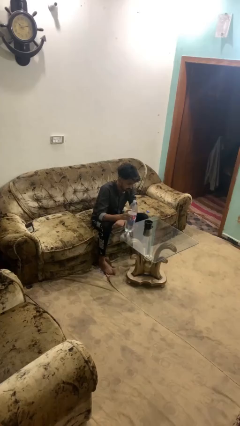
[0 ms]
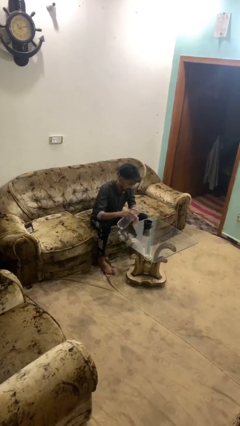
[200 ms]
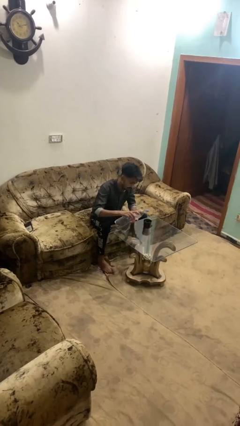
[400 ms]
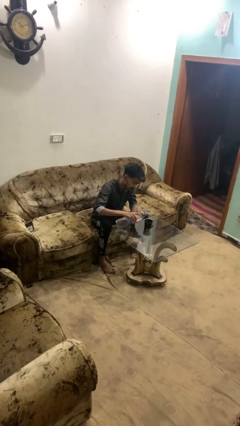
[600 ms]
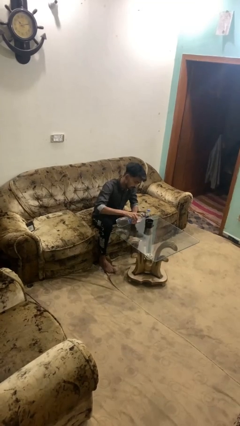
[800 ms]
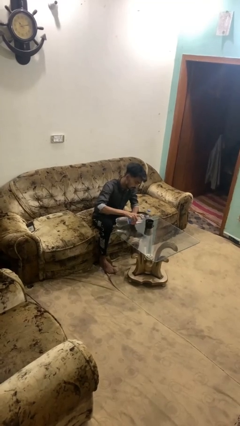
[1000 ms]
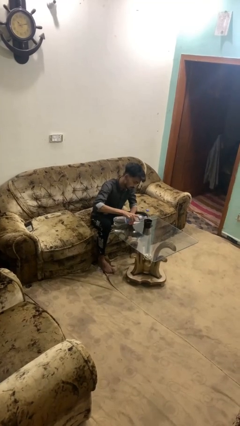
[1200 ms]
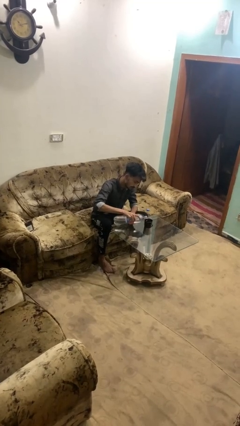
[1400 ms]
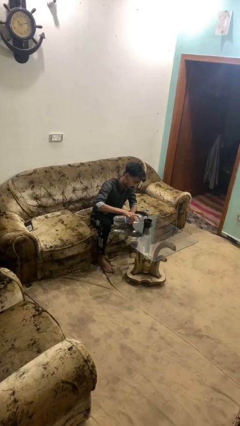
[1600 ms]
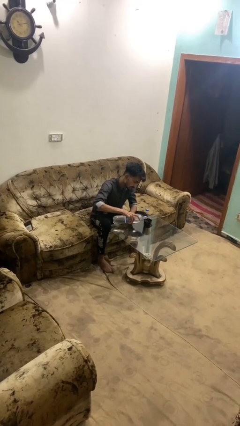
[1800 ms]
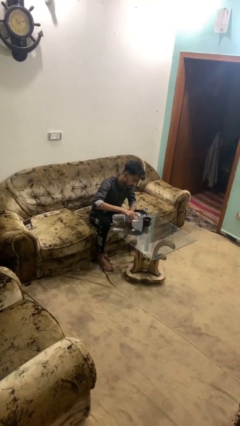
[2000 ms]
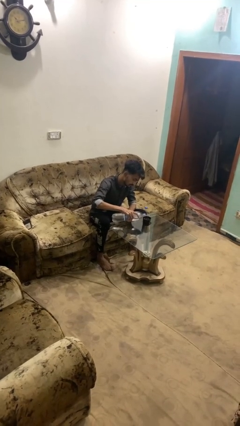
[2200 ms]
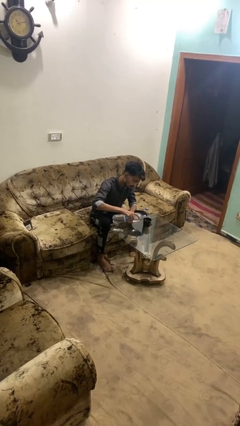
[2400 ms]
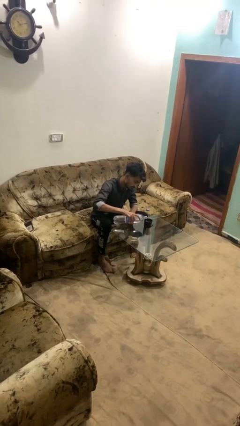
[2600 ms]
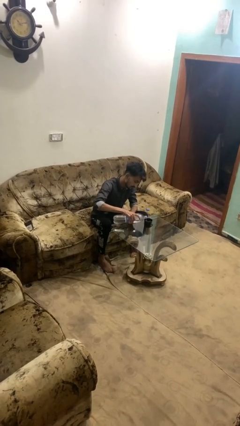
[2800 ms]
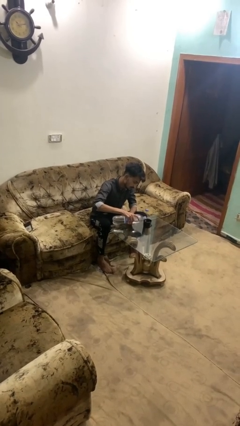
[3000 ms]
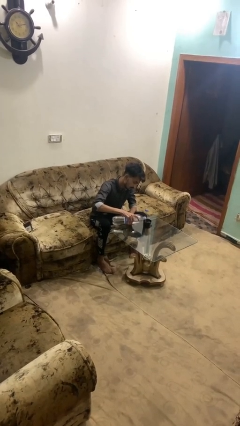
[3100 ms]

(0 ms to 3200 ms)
person pours liquid into cup

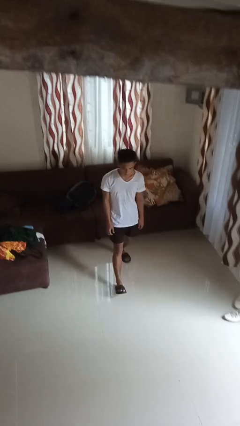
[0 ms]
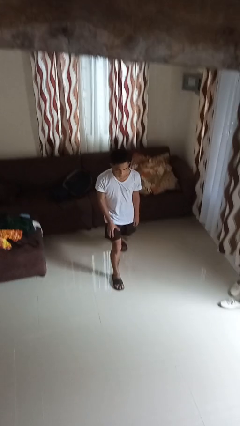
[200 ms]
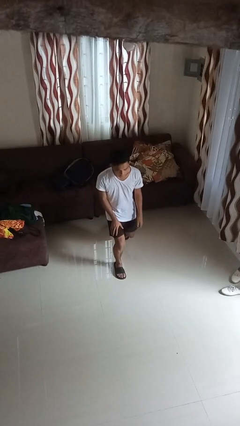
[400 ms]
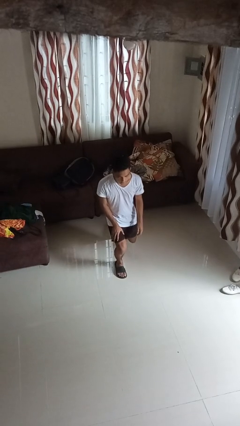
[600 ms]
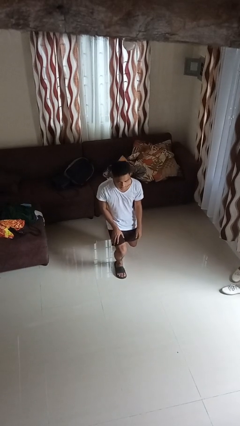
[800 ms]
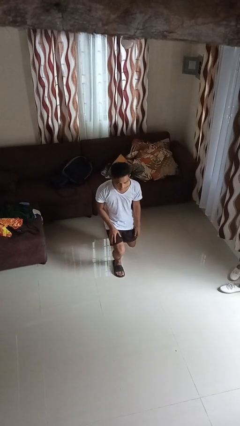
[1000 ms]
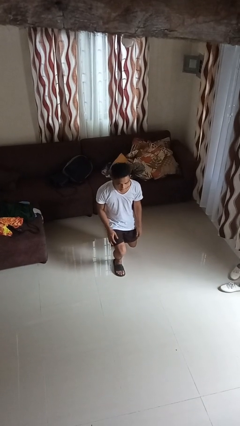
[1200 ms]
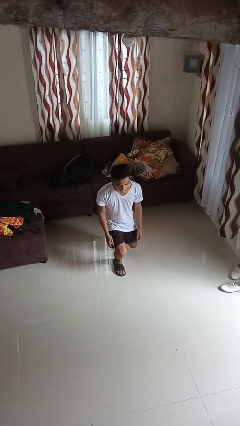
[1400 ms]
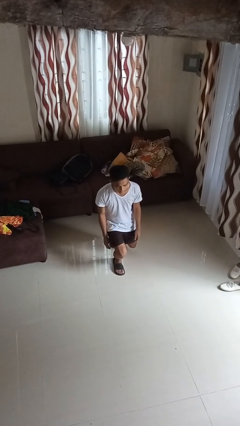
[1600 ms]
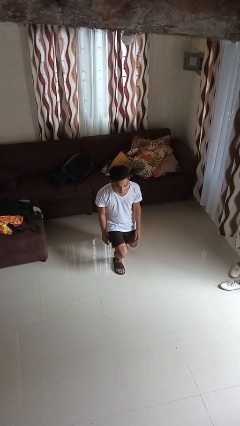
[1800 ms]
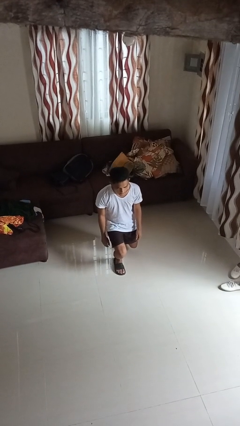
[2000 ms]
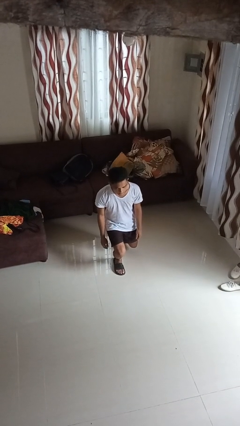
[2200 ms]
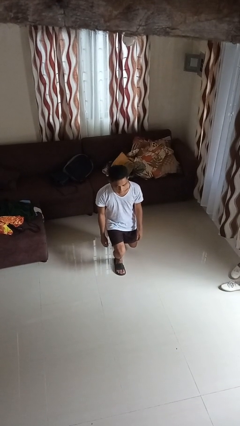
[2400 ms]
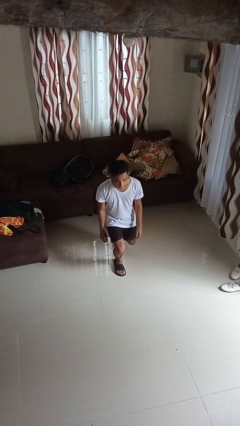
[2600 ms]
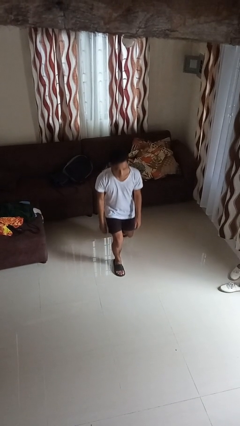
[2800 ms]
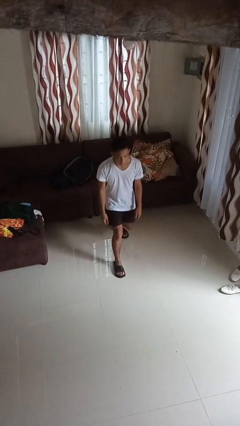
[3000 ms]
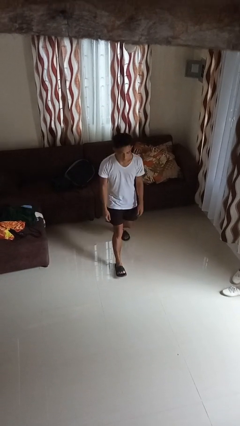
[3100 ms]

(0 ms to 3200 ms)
person exercises with lunges

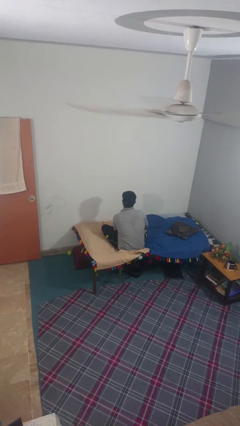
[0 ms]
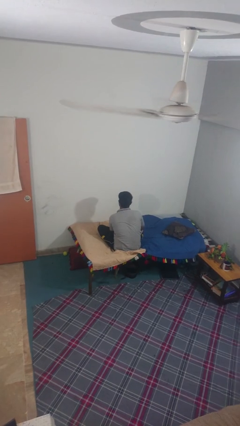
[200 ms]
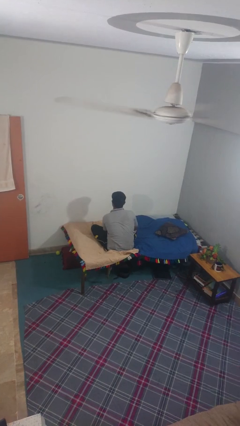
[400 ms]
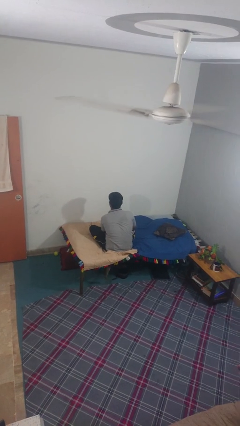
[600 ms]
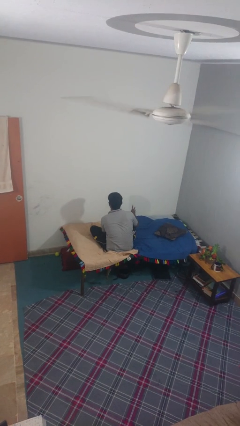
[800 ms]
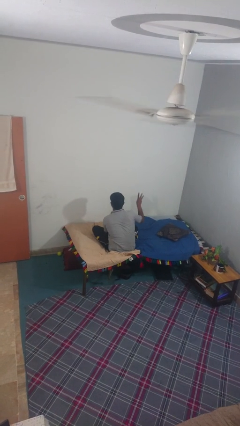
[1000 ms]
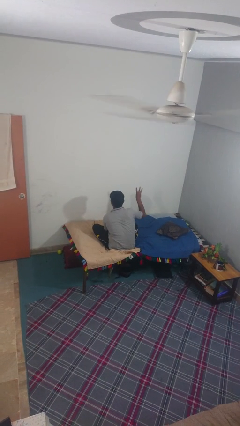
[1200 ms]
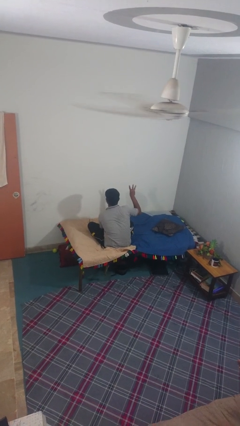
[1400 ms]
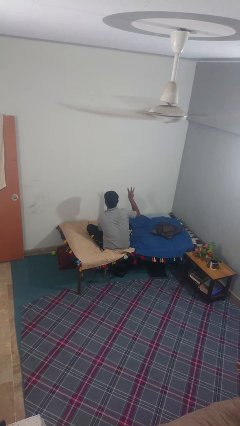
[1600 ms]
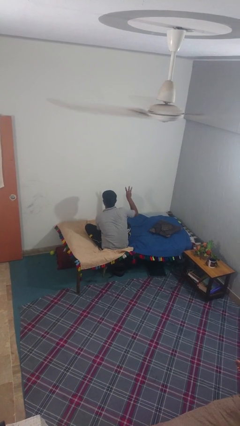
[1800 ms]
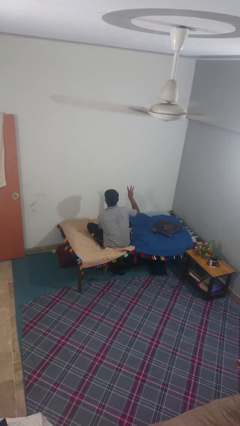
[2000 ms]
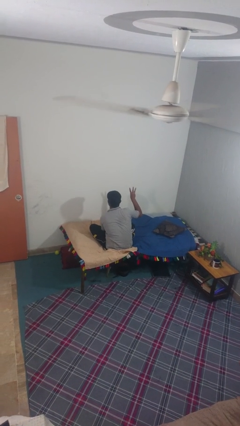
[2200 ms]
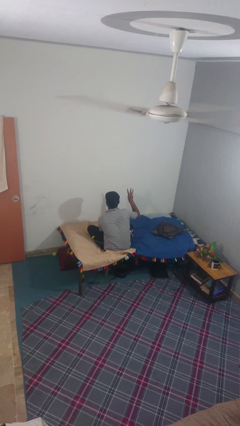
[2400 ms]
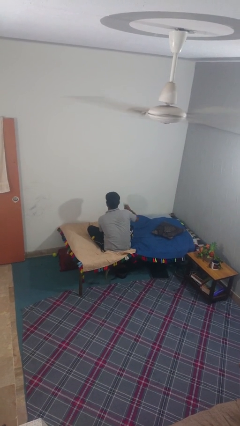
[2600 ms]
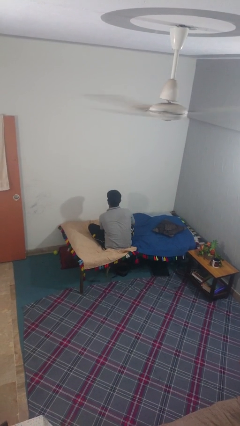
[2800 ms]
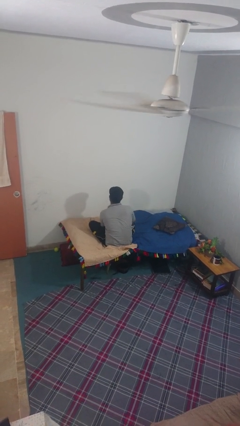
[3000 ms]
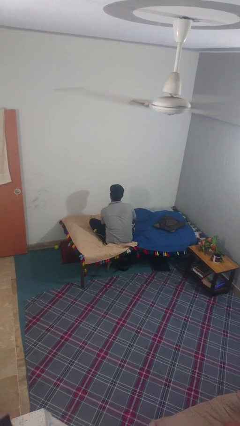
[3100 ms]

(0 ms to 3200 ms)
person gestures number three

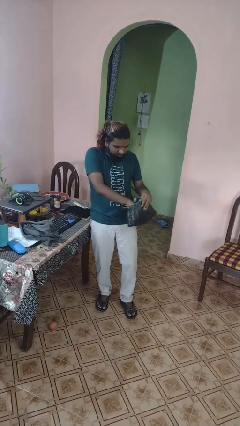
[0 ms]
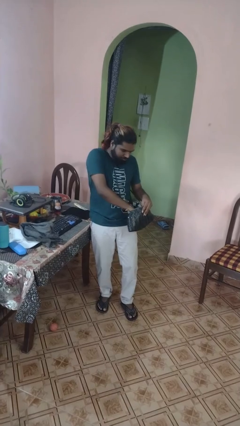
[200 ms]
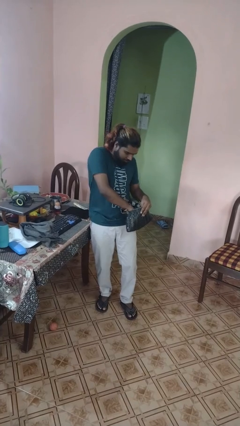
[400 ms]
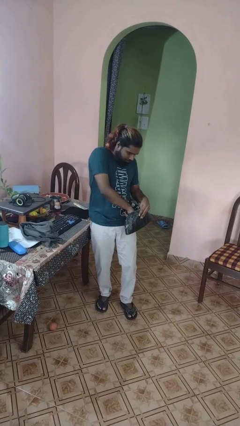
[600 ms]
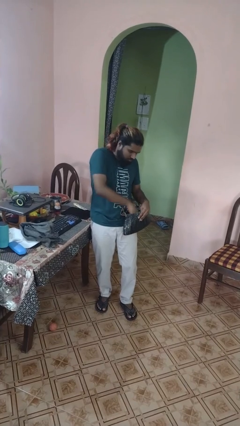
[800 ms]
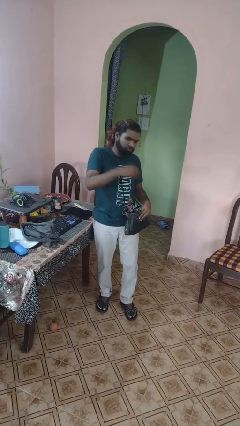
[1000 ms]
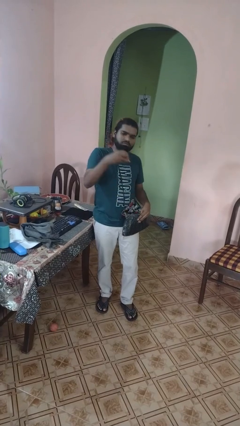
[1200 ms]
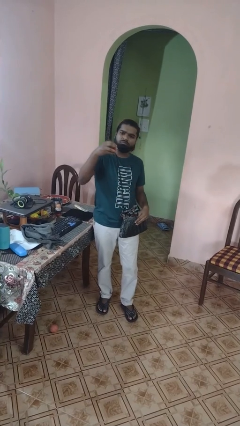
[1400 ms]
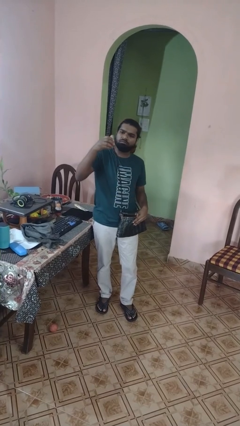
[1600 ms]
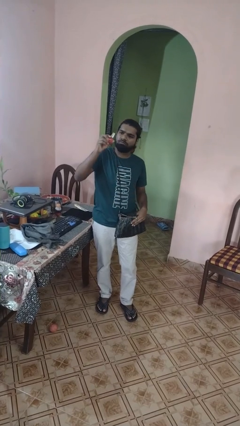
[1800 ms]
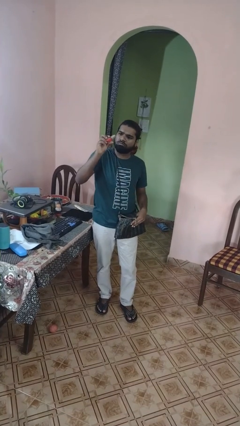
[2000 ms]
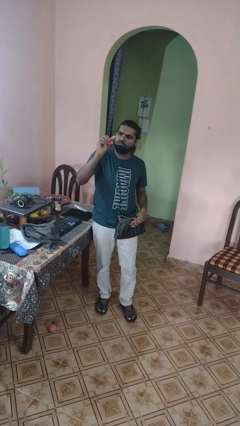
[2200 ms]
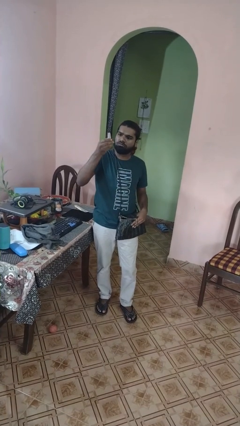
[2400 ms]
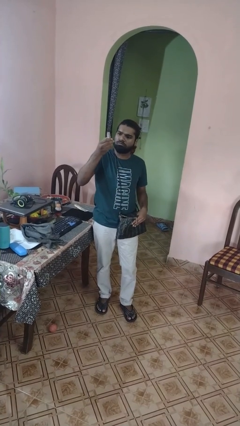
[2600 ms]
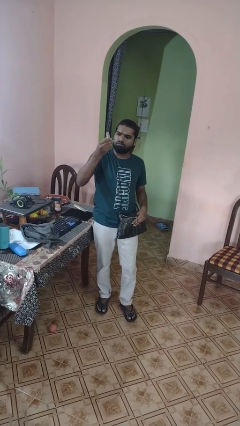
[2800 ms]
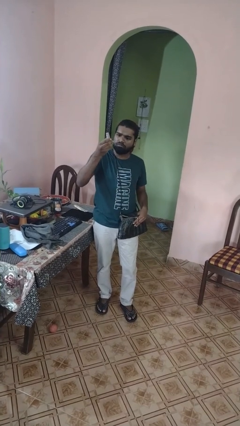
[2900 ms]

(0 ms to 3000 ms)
person takes object from purse

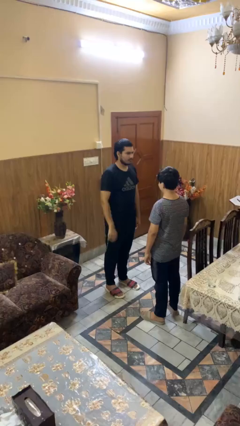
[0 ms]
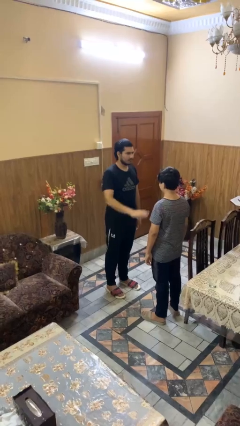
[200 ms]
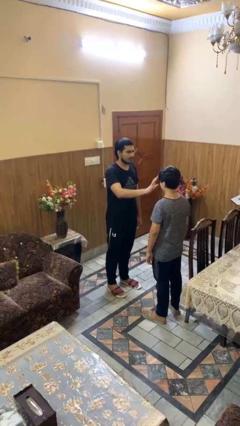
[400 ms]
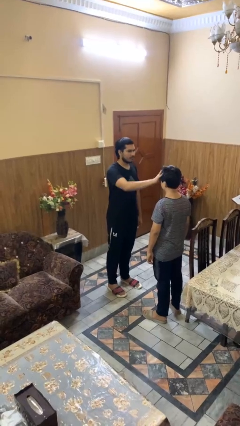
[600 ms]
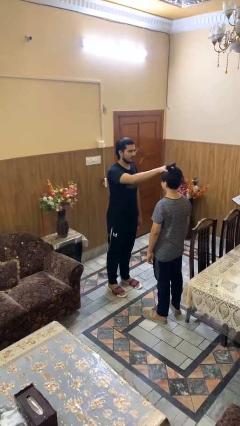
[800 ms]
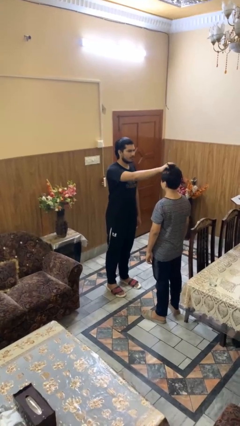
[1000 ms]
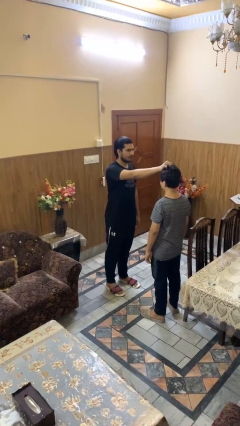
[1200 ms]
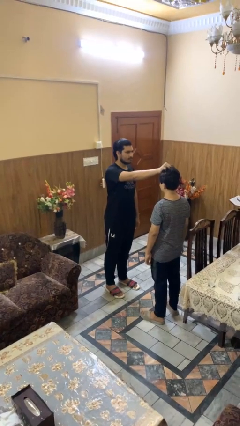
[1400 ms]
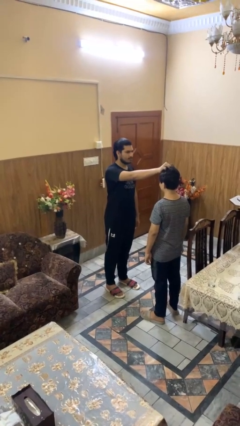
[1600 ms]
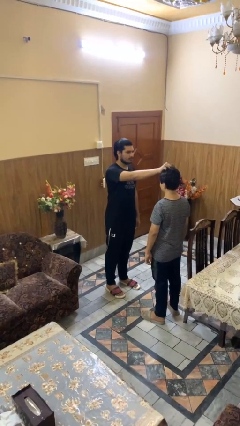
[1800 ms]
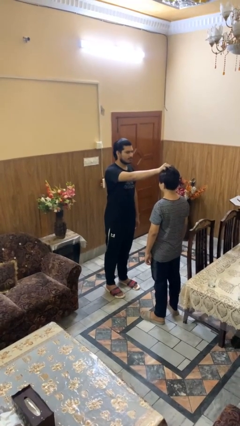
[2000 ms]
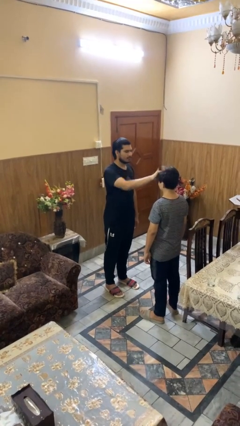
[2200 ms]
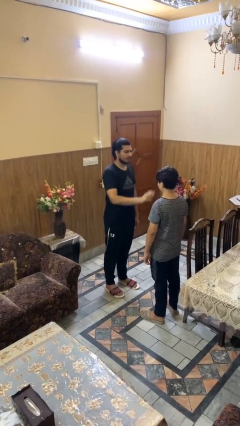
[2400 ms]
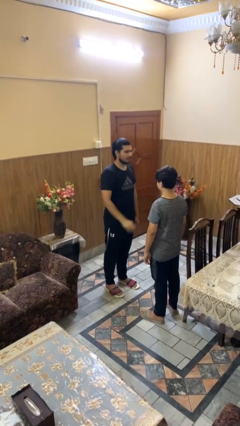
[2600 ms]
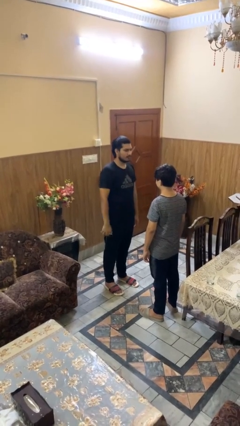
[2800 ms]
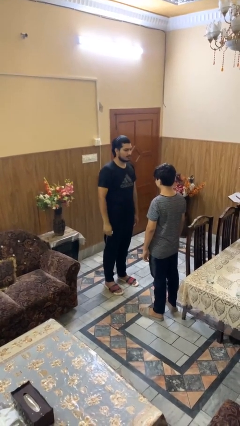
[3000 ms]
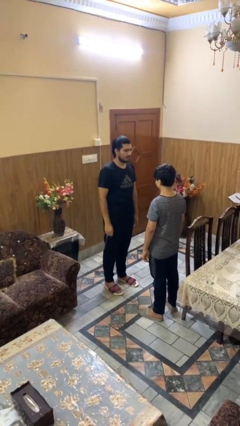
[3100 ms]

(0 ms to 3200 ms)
person grabs person by hair

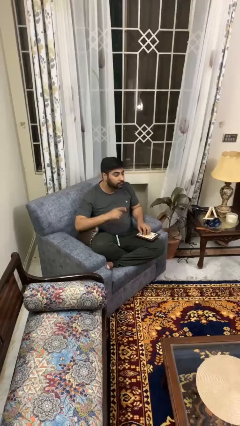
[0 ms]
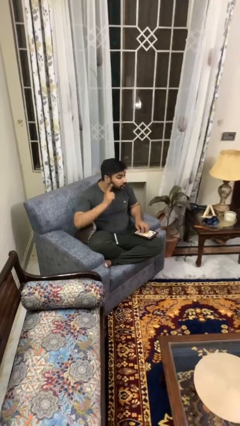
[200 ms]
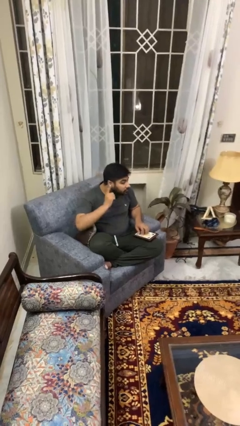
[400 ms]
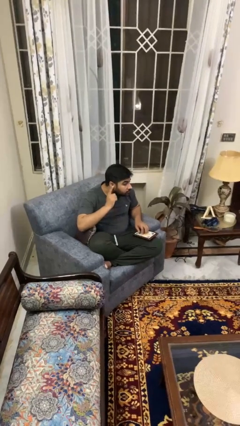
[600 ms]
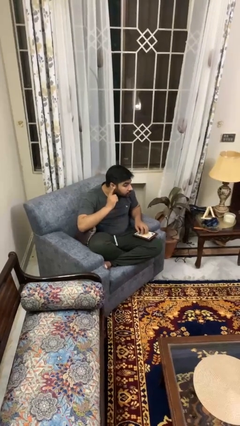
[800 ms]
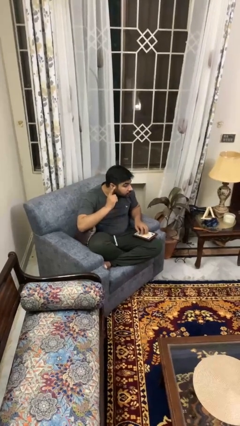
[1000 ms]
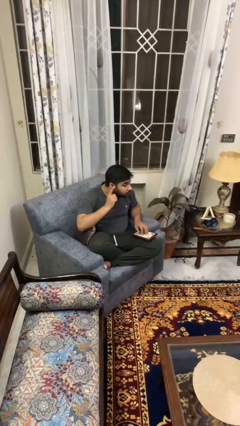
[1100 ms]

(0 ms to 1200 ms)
person gestures listen closely
